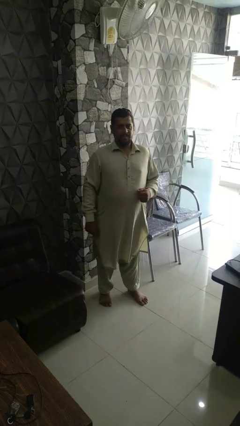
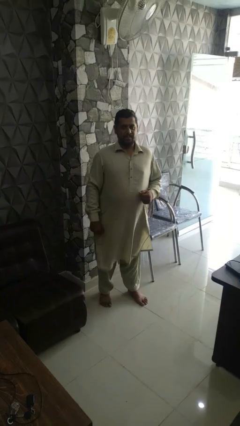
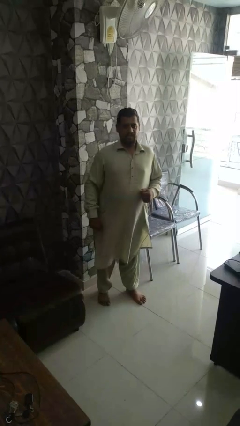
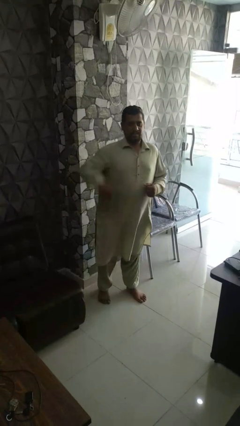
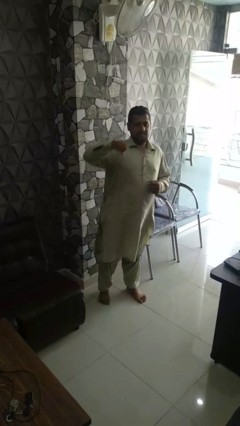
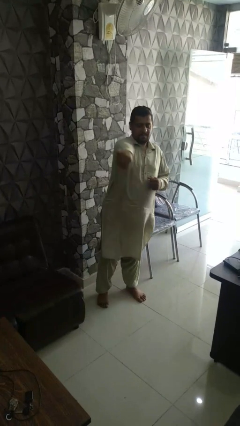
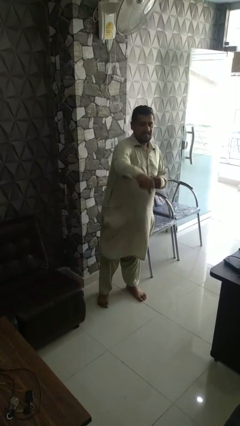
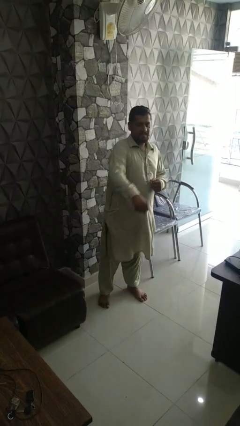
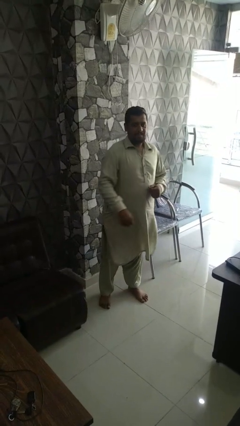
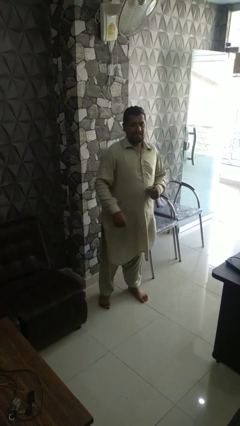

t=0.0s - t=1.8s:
person karate chop

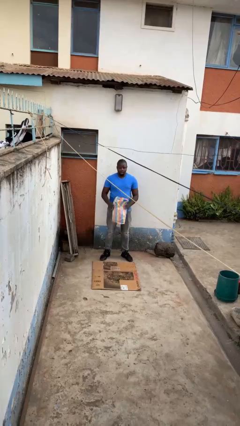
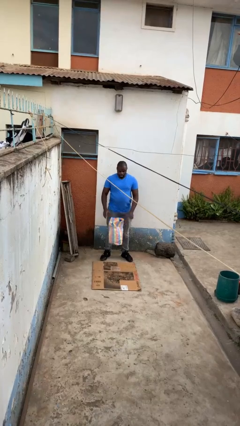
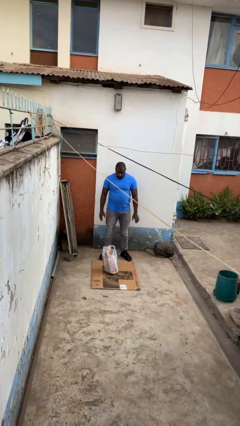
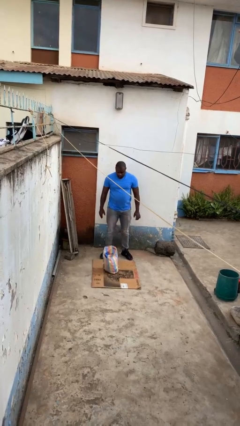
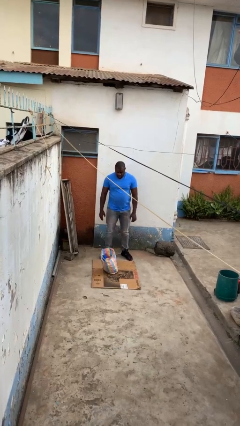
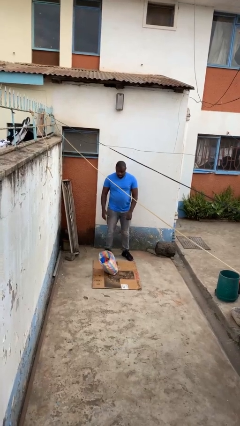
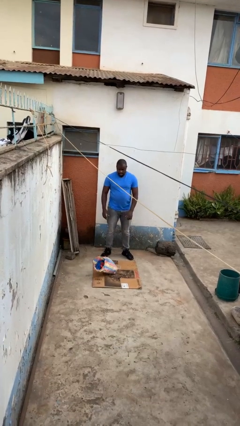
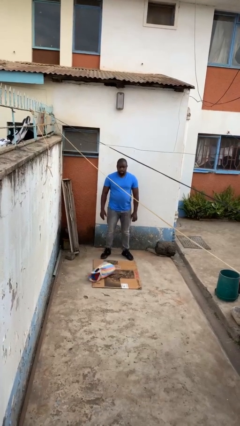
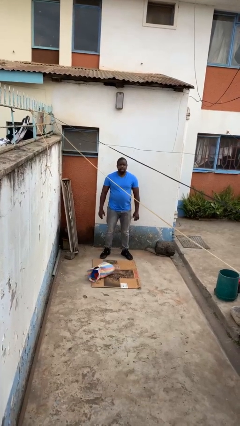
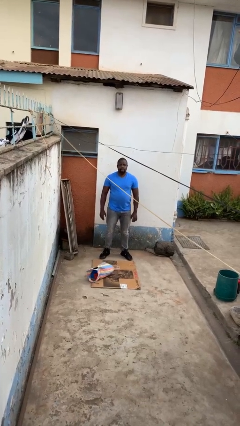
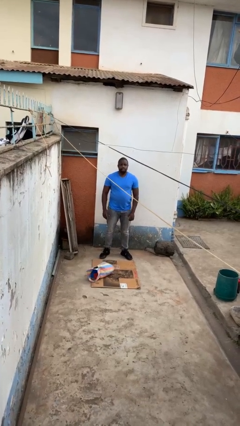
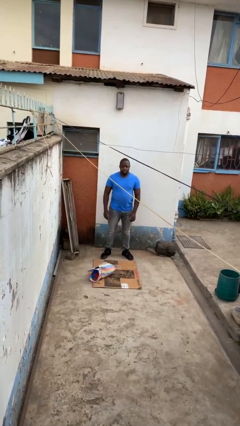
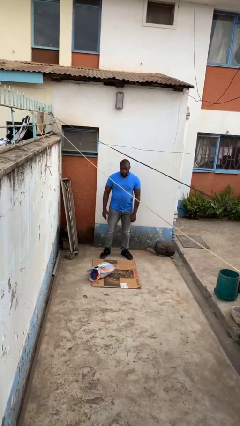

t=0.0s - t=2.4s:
person drops object

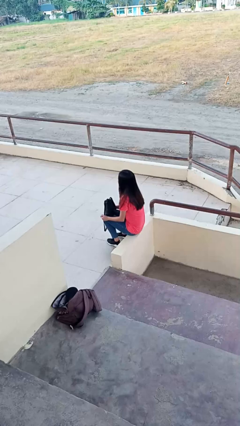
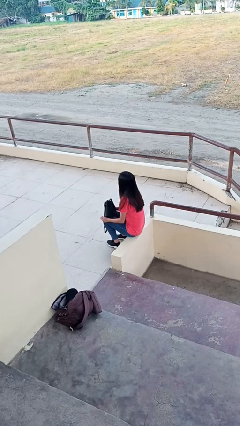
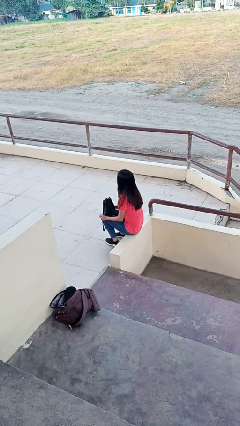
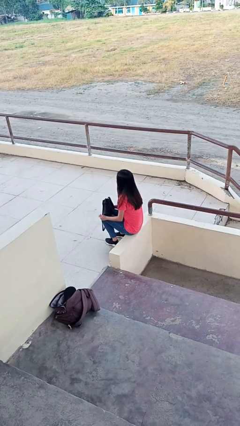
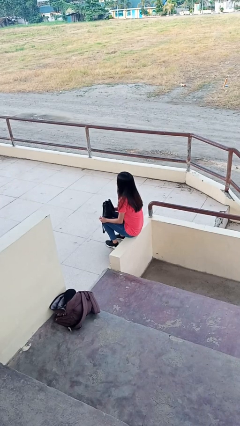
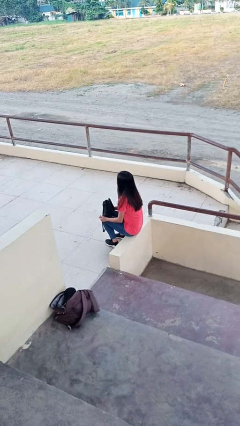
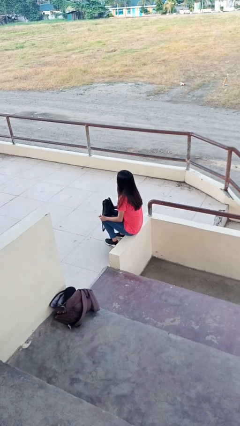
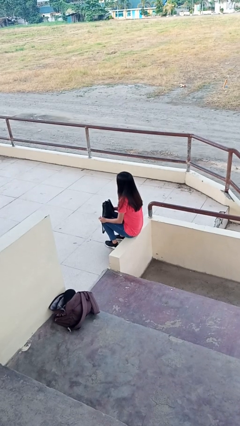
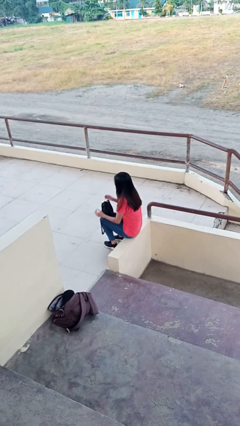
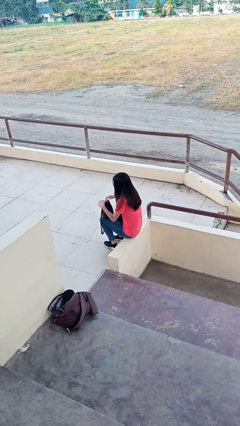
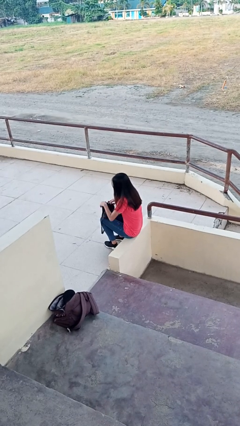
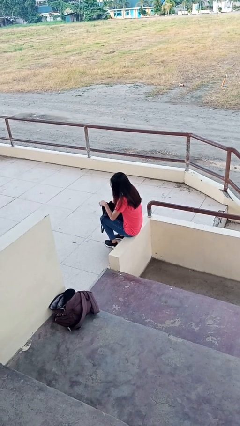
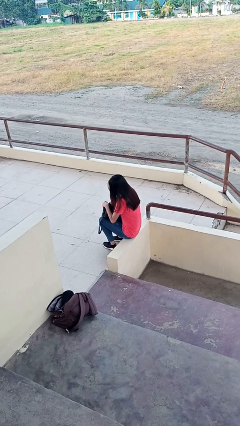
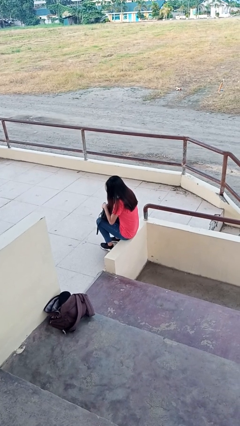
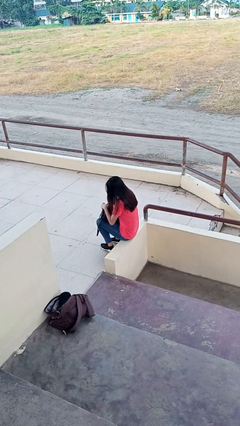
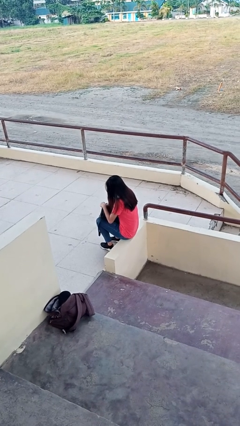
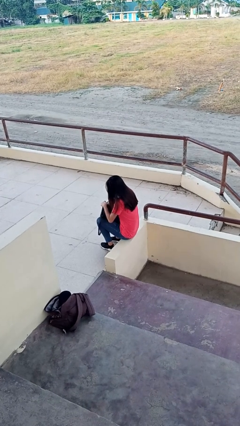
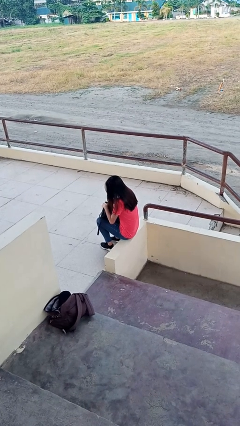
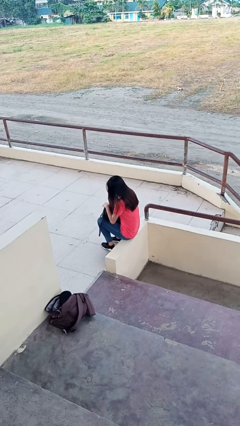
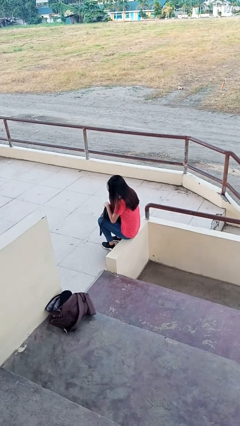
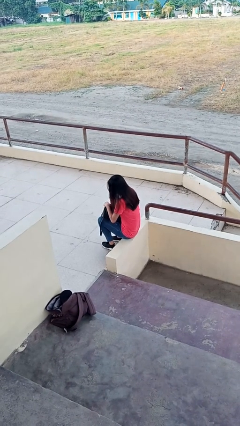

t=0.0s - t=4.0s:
person searches in purse

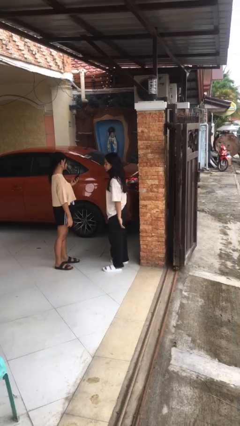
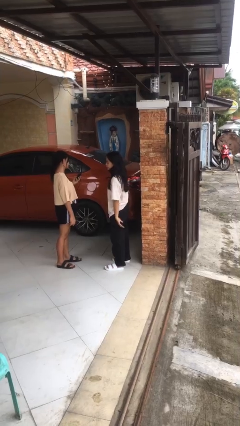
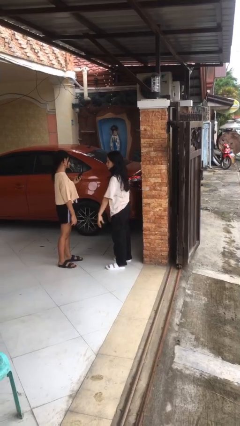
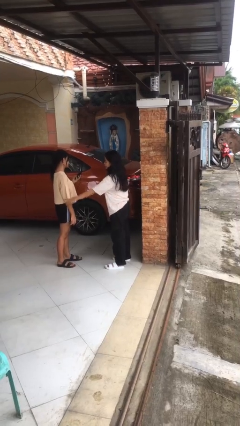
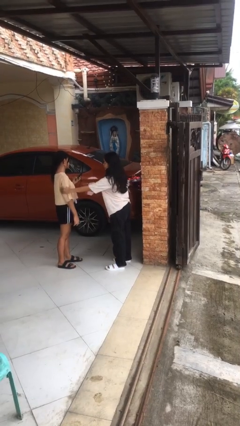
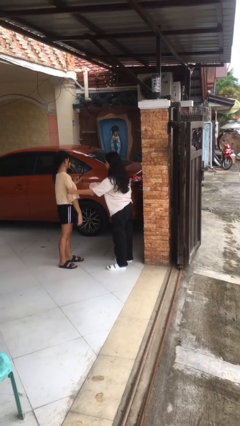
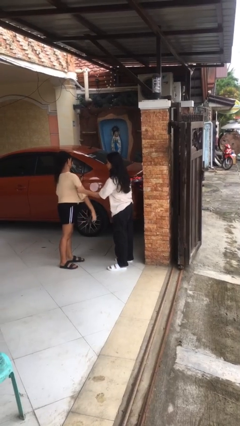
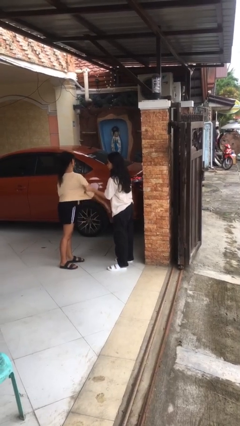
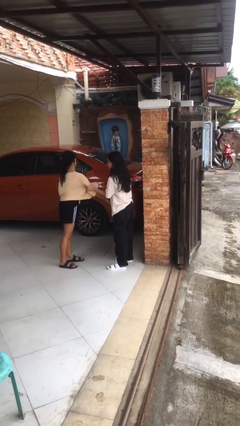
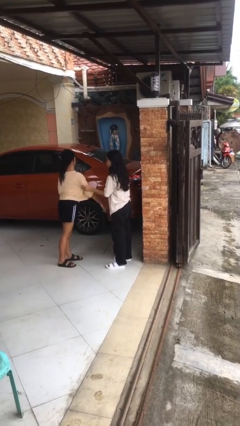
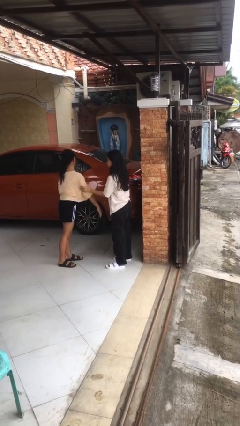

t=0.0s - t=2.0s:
person grabs person by bicep

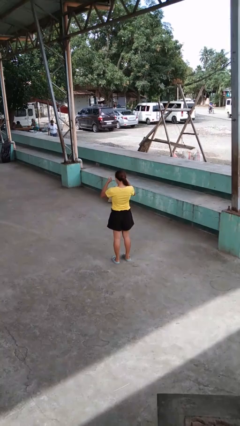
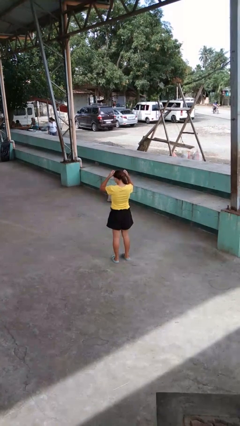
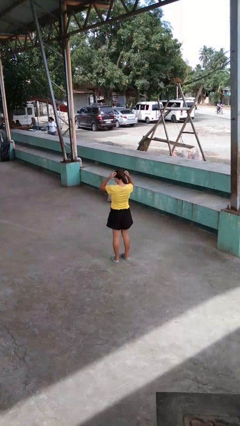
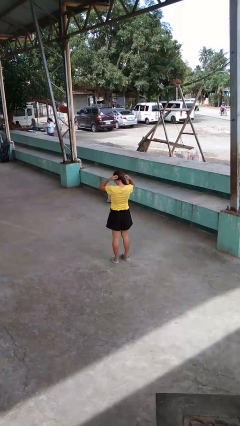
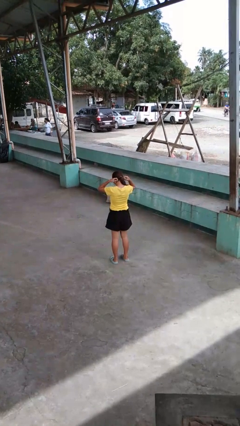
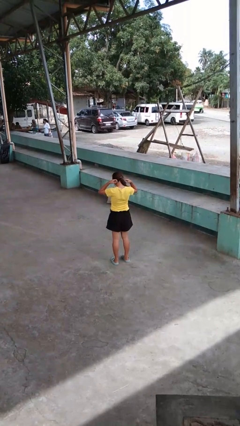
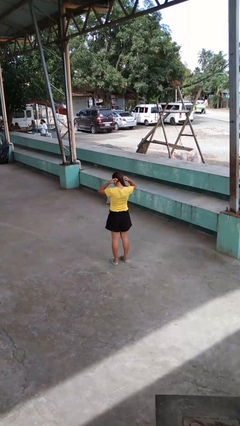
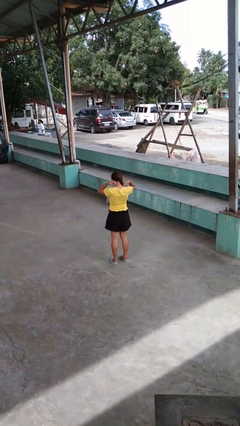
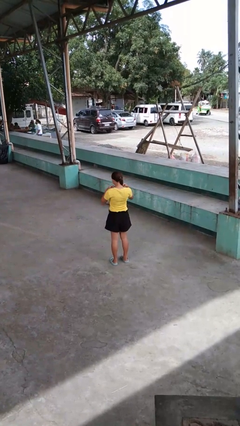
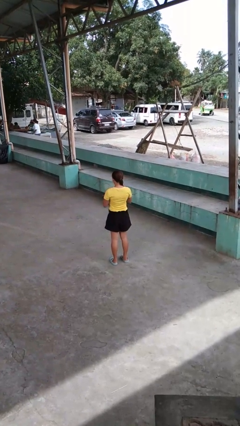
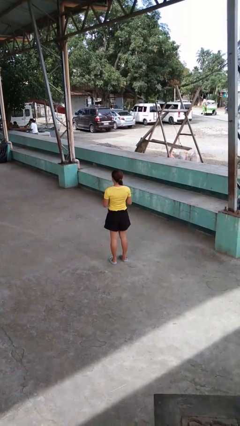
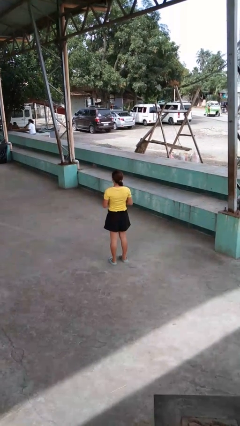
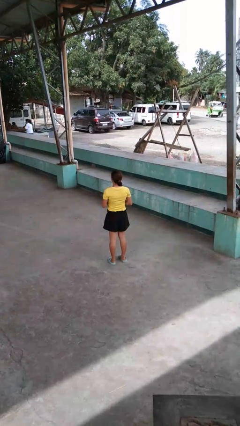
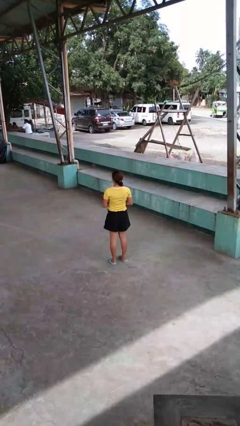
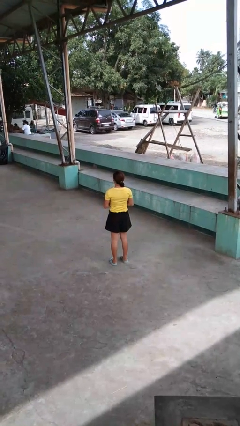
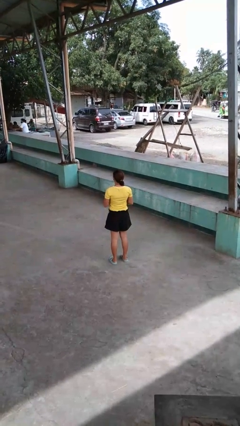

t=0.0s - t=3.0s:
person puts on necklace

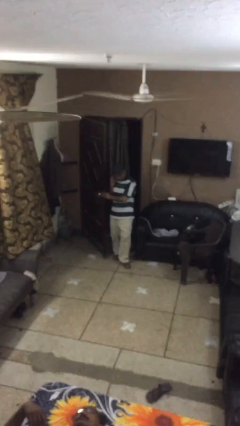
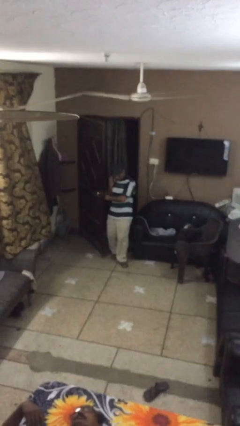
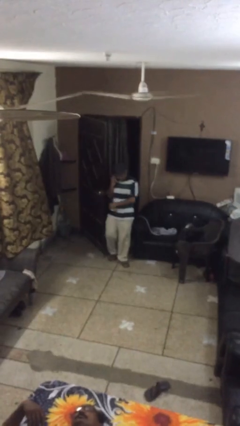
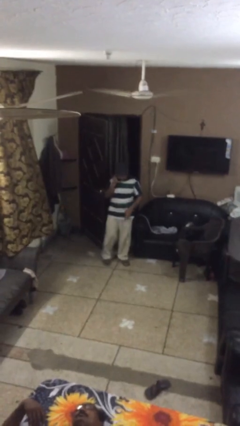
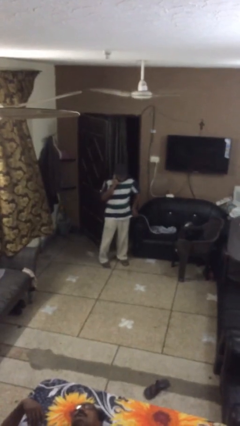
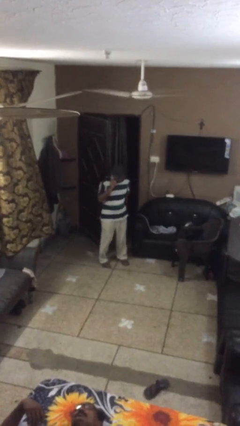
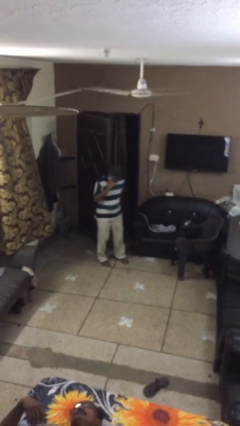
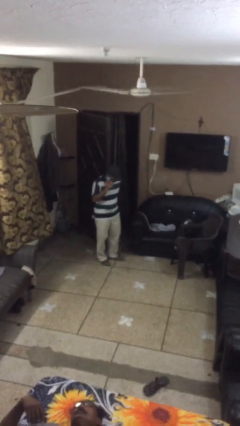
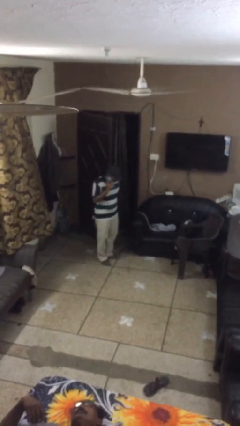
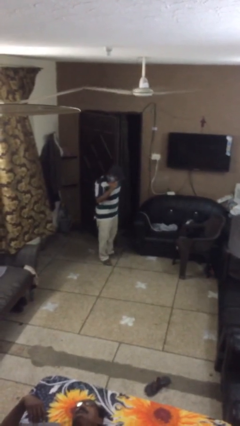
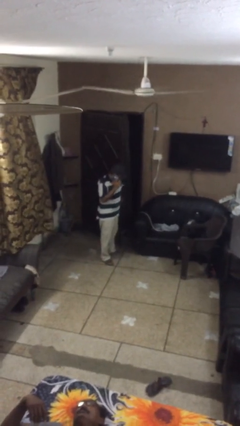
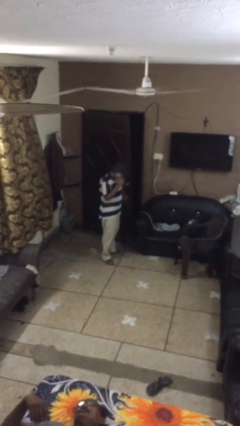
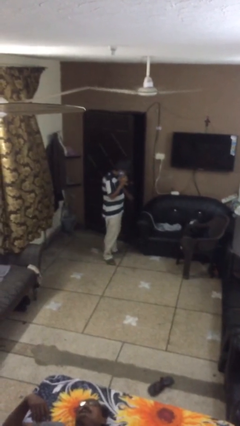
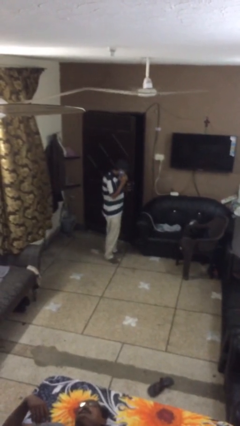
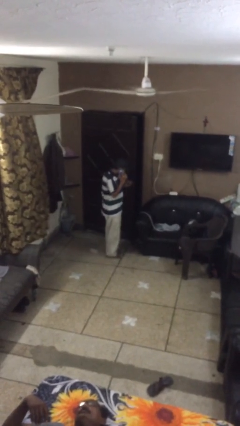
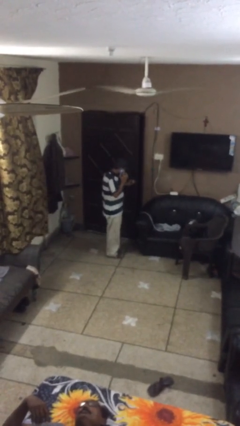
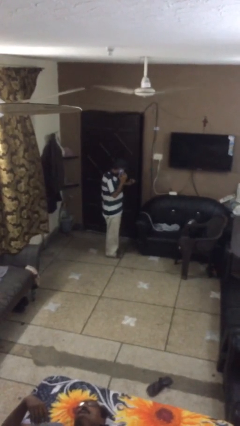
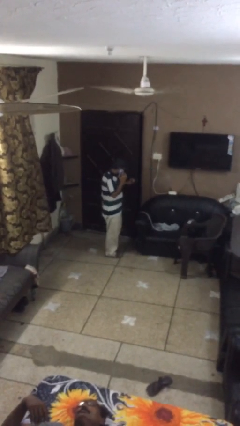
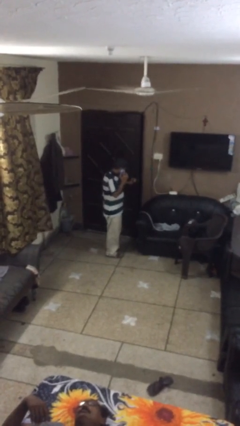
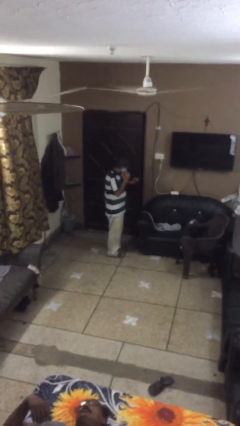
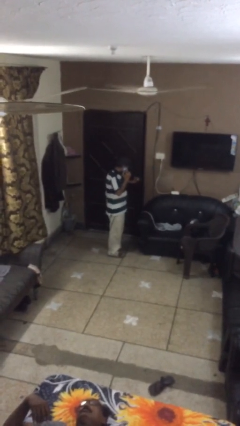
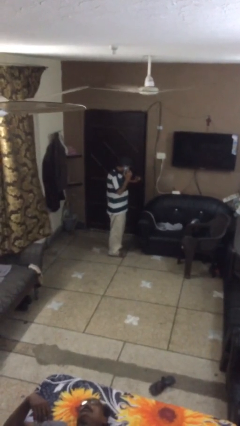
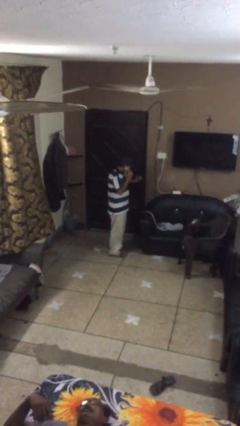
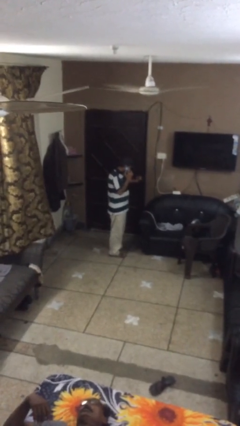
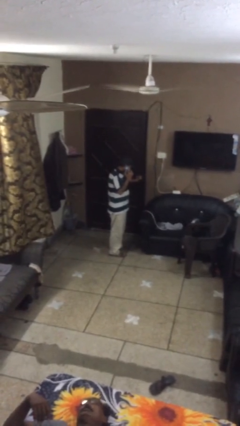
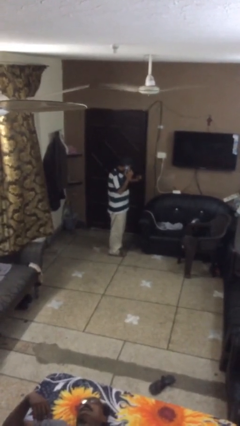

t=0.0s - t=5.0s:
person closes facility door
